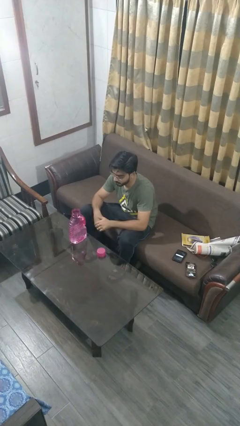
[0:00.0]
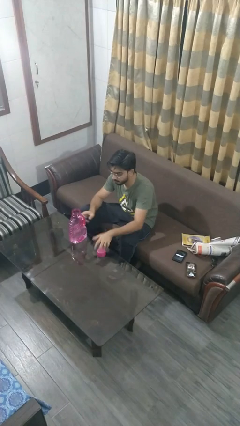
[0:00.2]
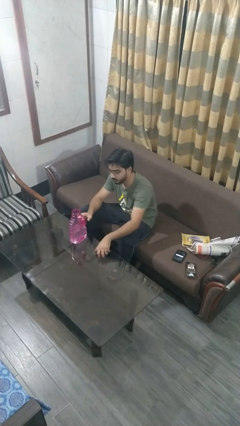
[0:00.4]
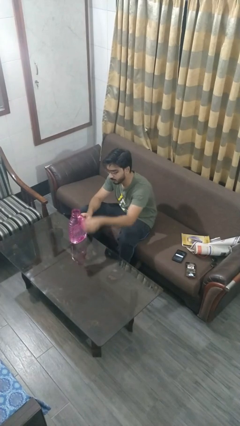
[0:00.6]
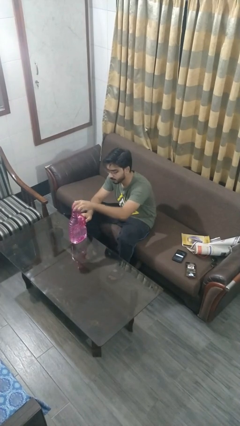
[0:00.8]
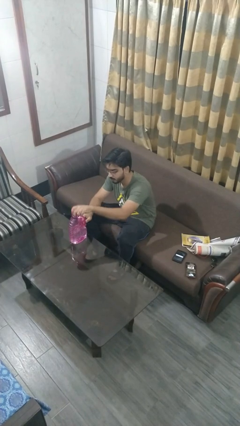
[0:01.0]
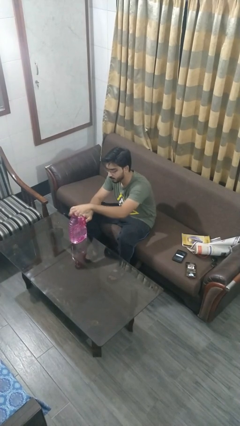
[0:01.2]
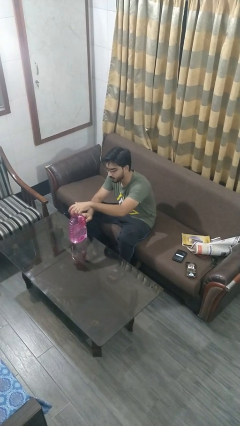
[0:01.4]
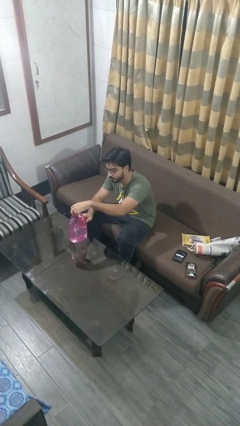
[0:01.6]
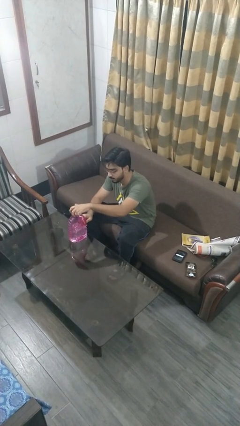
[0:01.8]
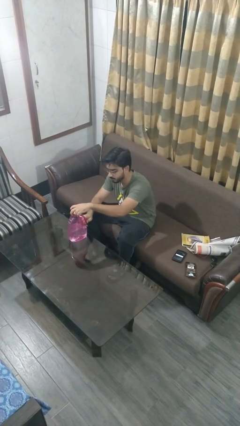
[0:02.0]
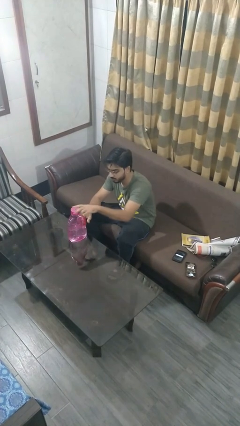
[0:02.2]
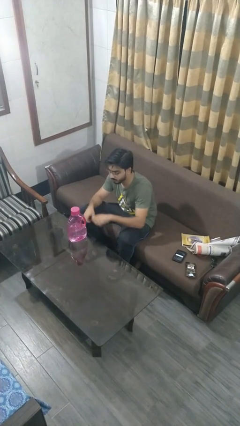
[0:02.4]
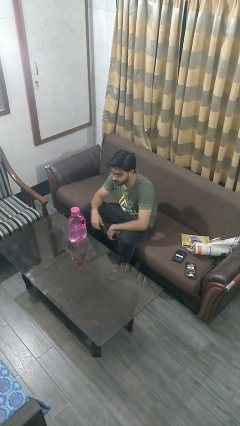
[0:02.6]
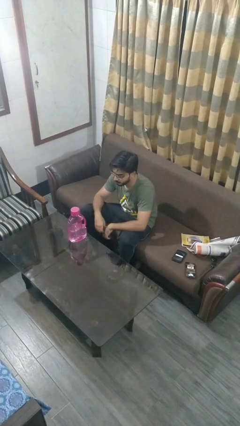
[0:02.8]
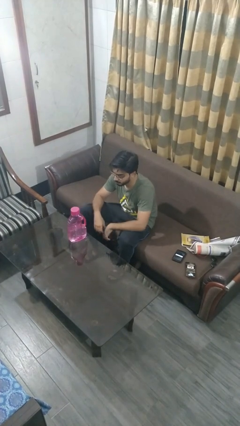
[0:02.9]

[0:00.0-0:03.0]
person screws lid to bottle

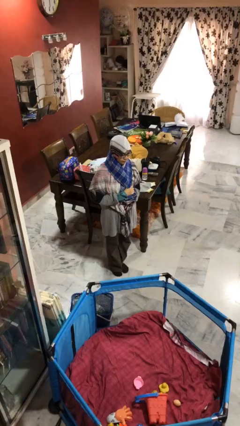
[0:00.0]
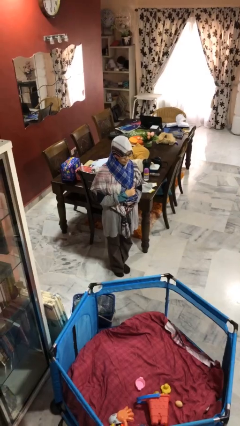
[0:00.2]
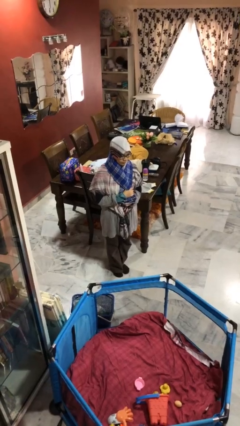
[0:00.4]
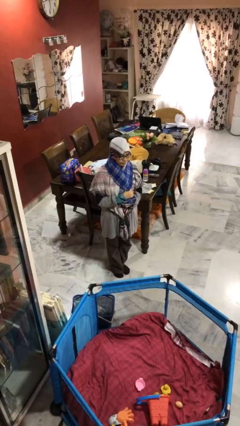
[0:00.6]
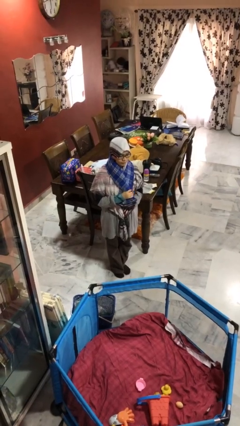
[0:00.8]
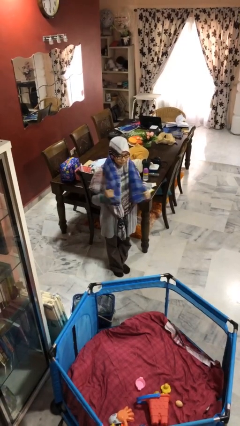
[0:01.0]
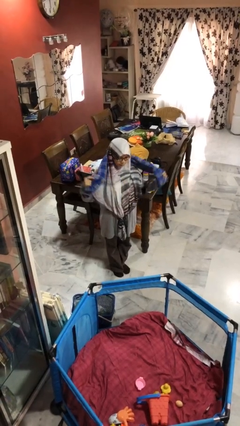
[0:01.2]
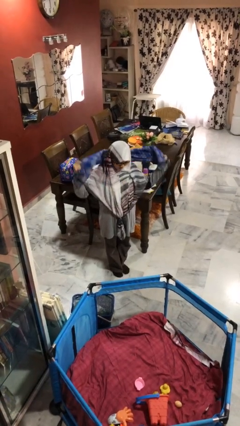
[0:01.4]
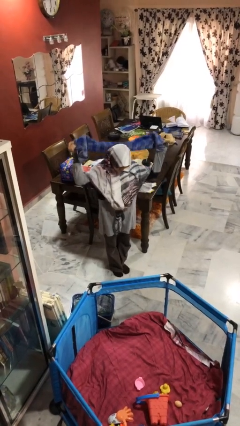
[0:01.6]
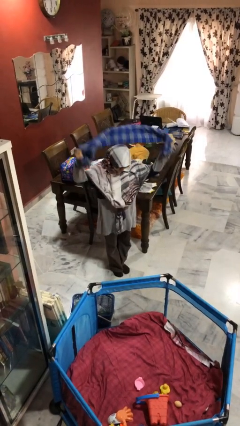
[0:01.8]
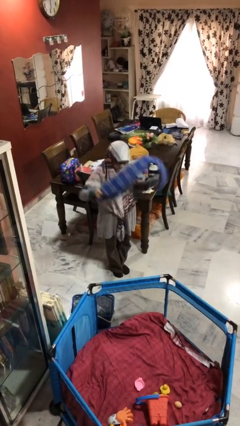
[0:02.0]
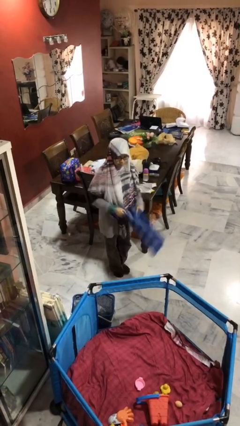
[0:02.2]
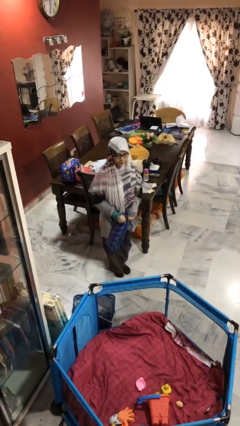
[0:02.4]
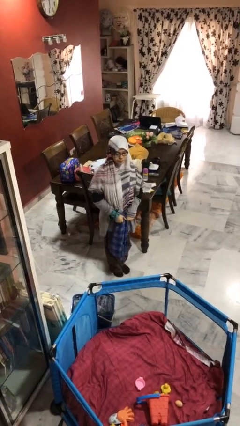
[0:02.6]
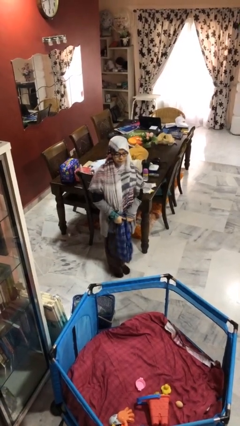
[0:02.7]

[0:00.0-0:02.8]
person takes off scarf

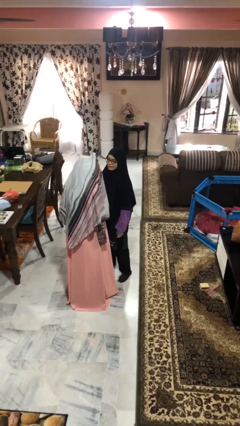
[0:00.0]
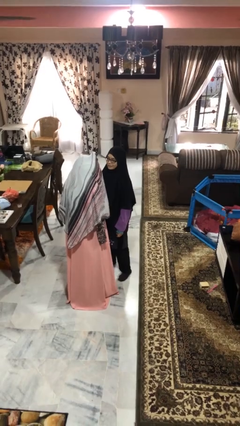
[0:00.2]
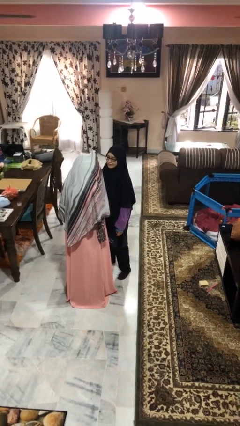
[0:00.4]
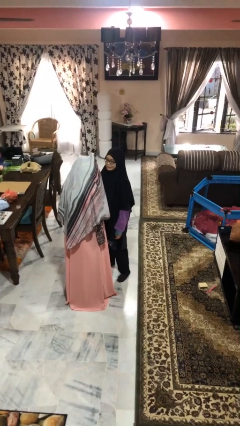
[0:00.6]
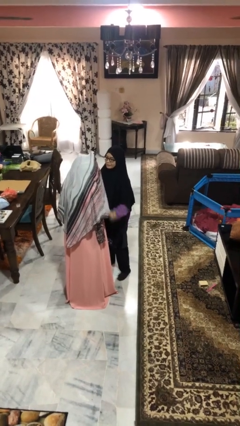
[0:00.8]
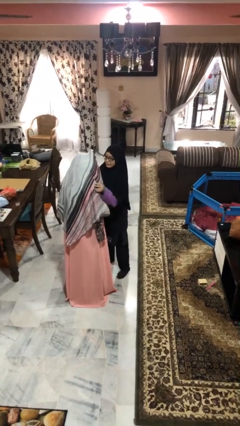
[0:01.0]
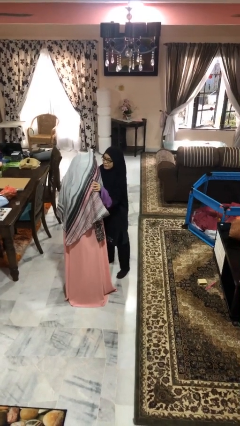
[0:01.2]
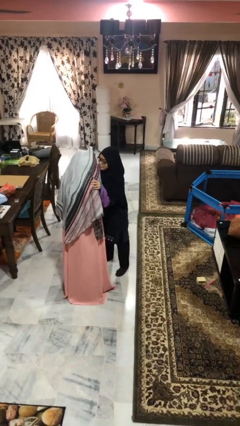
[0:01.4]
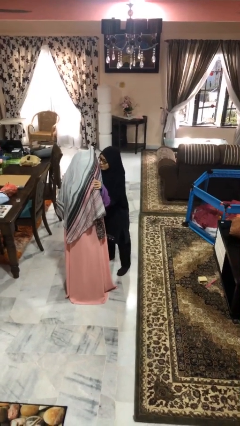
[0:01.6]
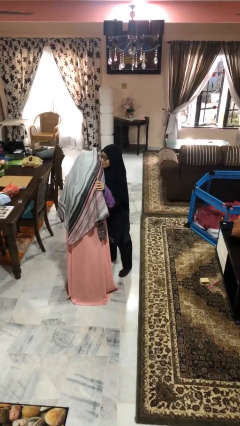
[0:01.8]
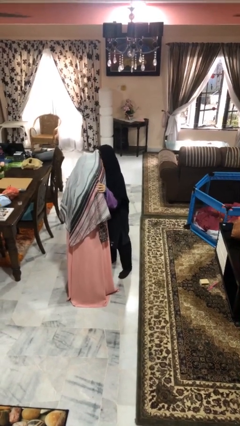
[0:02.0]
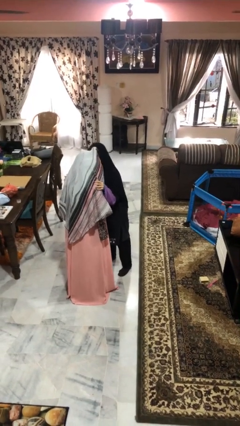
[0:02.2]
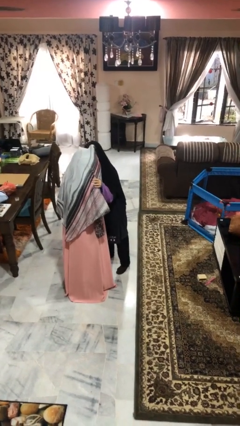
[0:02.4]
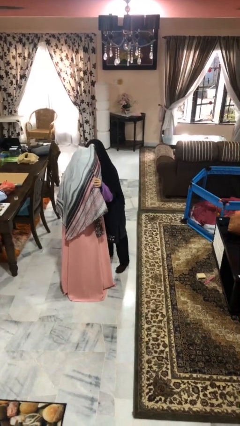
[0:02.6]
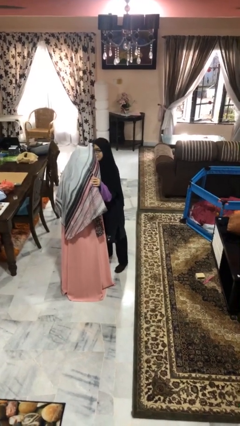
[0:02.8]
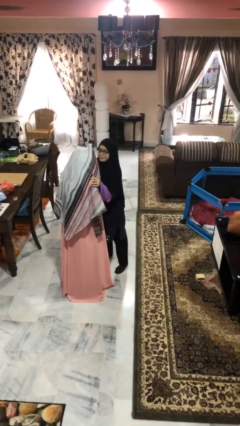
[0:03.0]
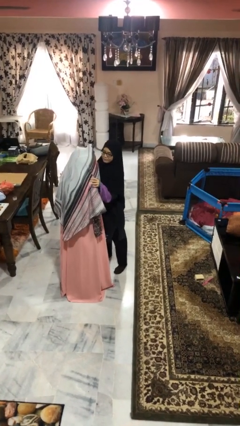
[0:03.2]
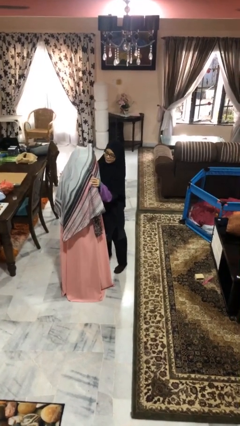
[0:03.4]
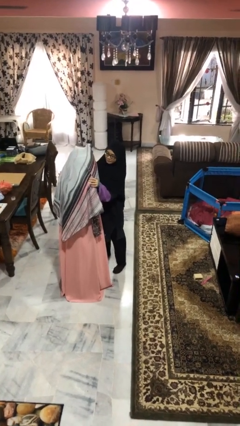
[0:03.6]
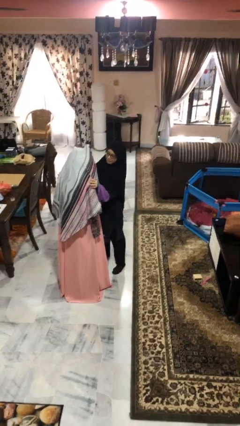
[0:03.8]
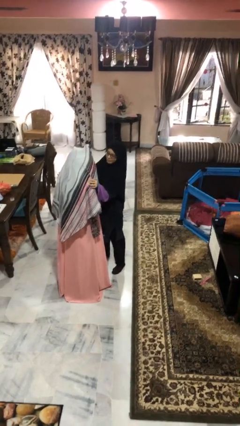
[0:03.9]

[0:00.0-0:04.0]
person kisses cheek of person

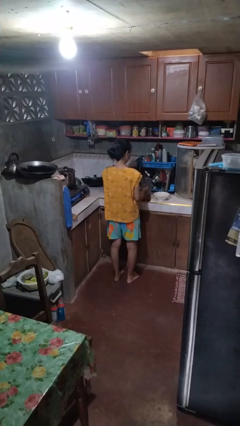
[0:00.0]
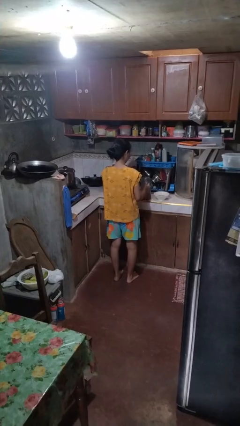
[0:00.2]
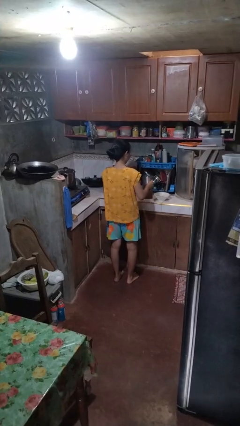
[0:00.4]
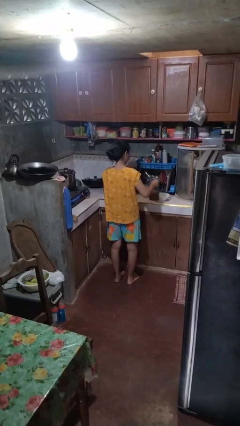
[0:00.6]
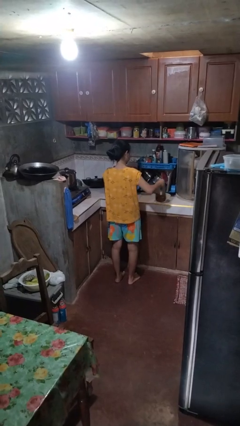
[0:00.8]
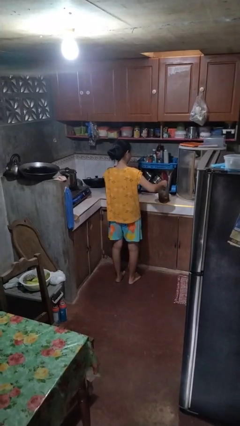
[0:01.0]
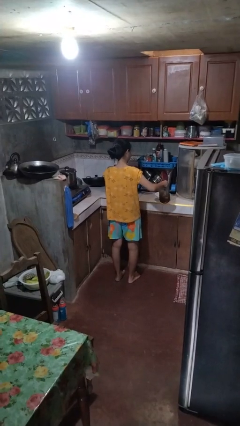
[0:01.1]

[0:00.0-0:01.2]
person pours into bowl

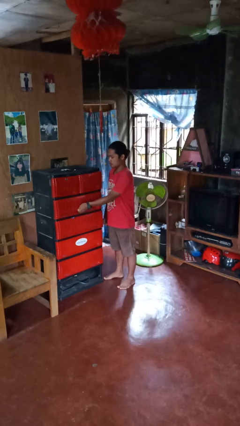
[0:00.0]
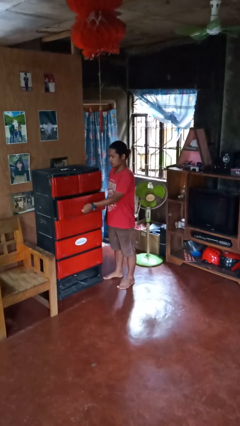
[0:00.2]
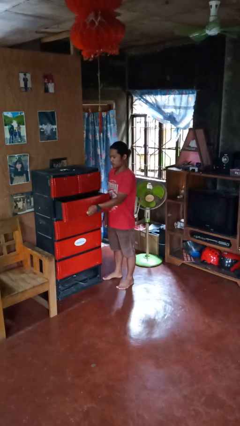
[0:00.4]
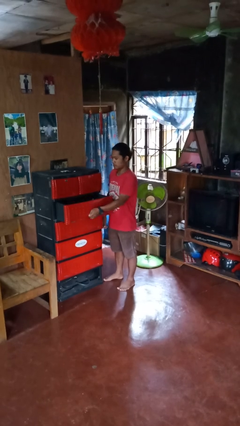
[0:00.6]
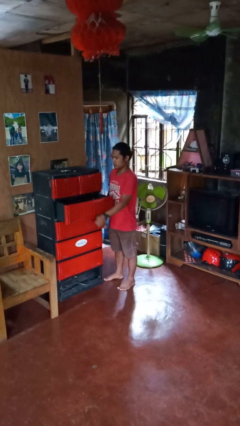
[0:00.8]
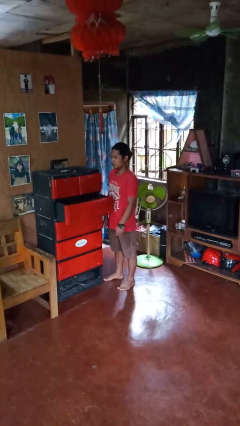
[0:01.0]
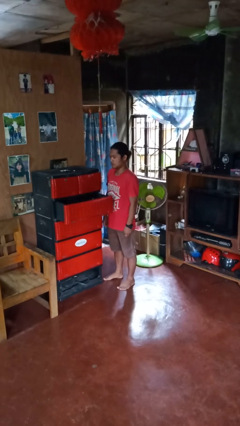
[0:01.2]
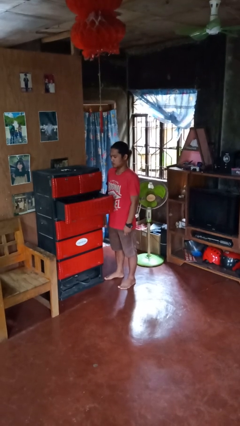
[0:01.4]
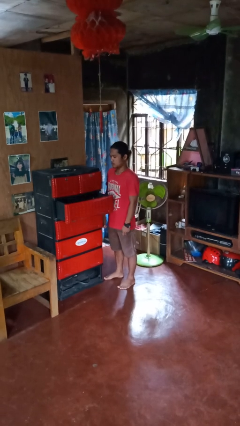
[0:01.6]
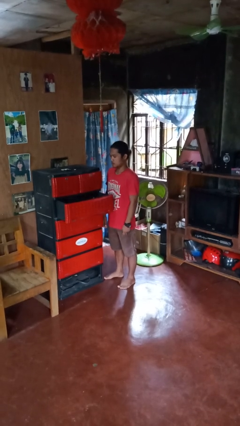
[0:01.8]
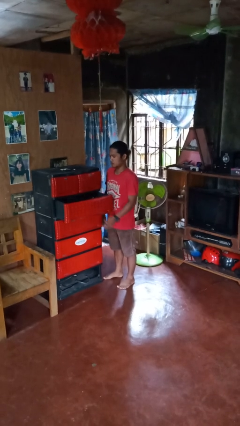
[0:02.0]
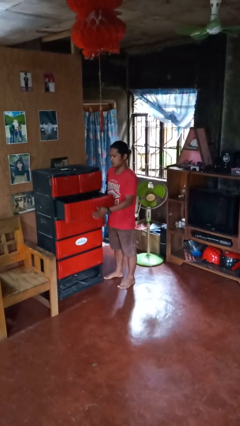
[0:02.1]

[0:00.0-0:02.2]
person opens dresser drawer

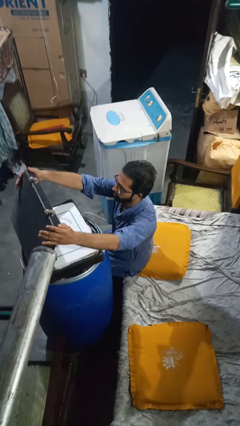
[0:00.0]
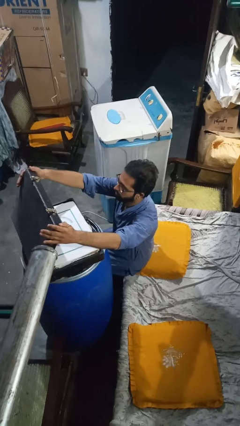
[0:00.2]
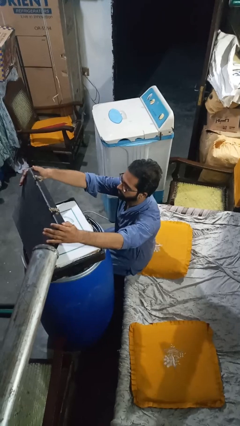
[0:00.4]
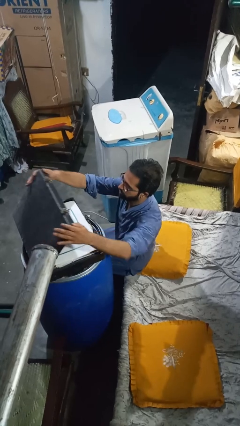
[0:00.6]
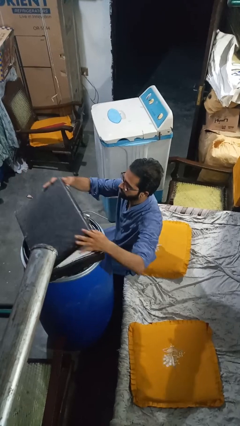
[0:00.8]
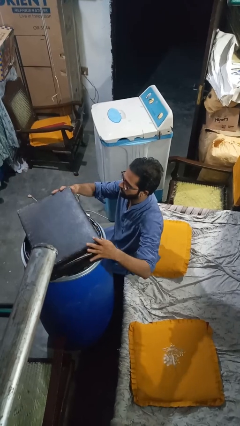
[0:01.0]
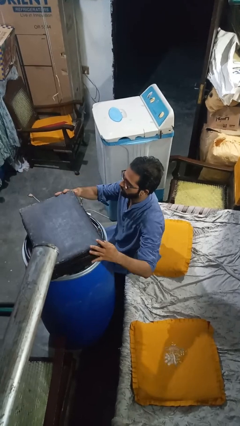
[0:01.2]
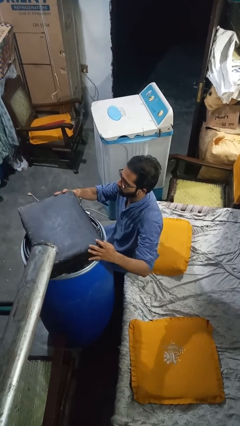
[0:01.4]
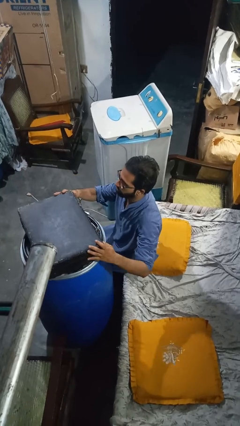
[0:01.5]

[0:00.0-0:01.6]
person closes suitcase

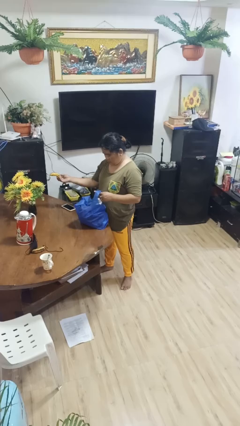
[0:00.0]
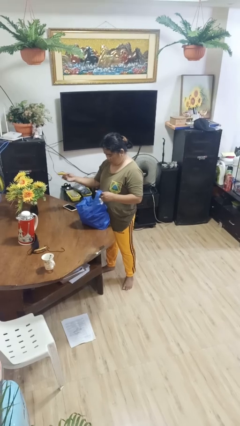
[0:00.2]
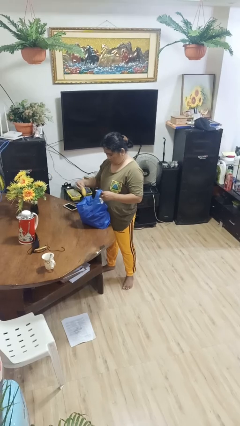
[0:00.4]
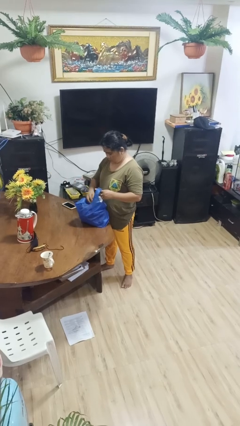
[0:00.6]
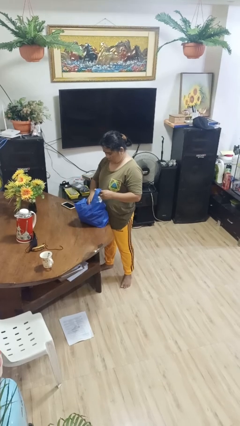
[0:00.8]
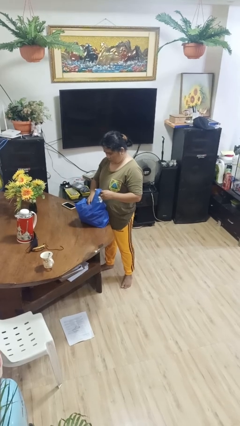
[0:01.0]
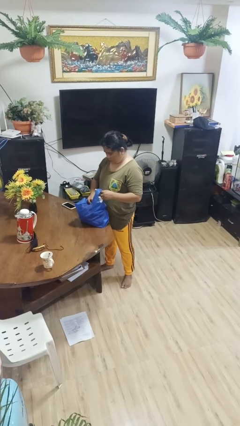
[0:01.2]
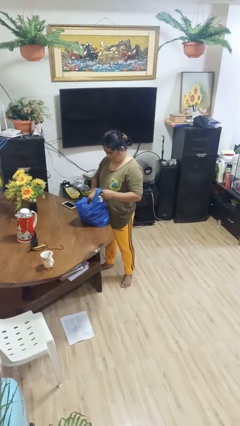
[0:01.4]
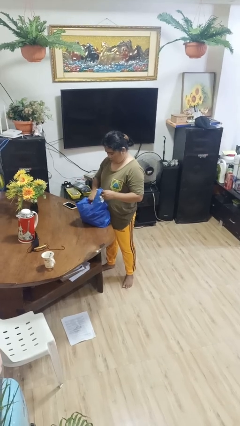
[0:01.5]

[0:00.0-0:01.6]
person puts object into bag

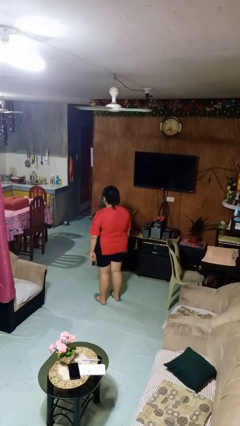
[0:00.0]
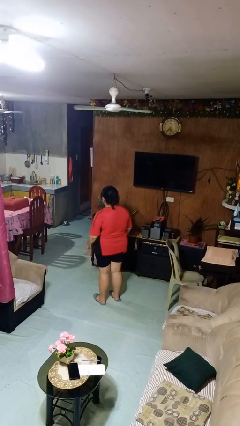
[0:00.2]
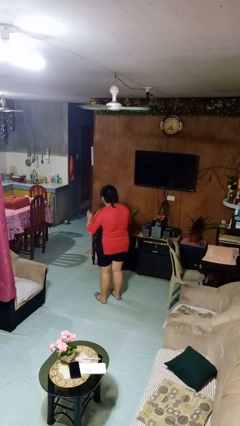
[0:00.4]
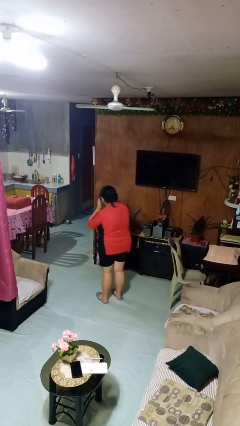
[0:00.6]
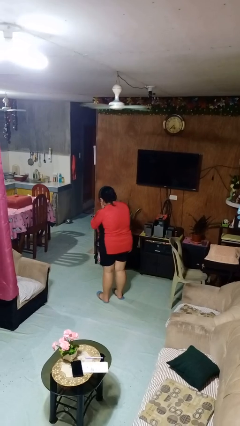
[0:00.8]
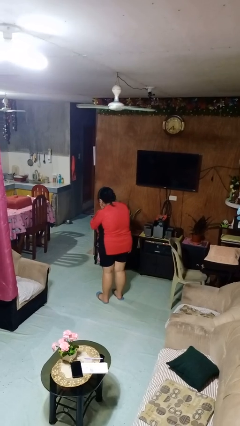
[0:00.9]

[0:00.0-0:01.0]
person sneezes into hand
